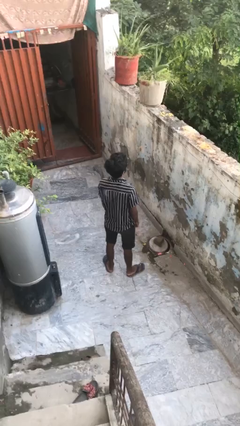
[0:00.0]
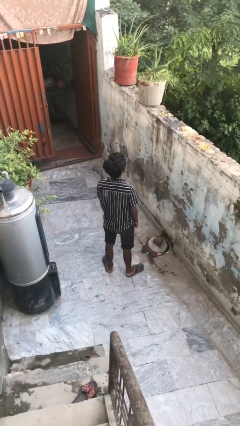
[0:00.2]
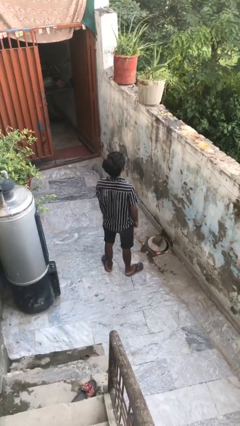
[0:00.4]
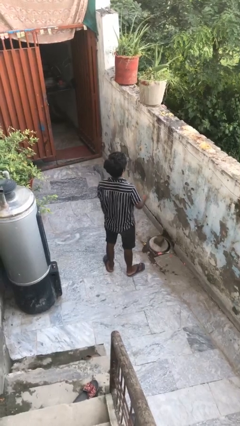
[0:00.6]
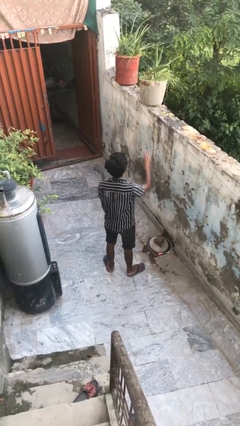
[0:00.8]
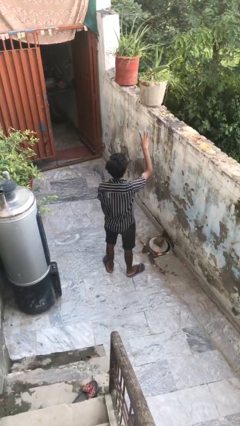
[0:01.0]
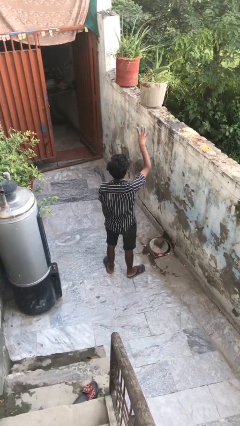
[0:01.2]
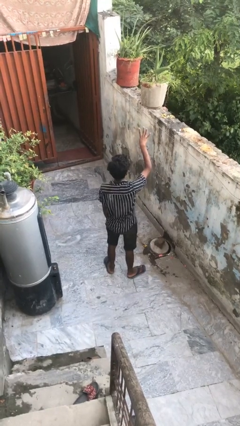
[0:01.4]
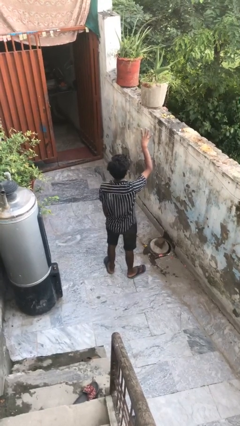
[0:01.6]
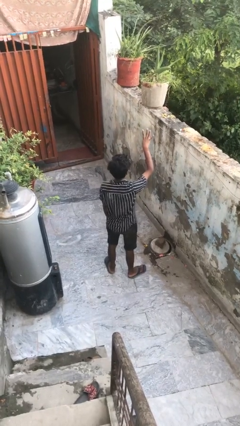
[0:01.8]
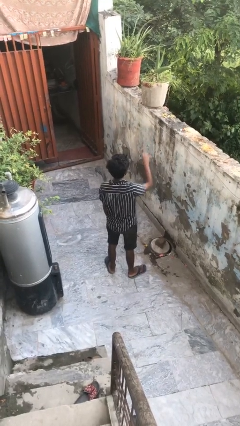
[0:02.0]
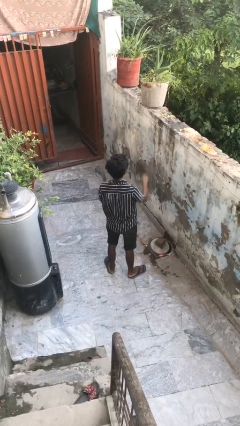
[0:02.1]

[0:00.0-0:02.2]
person gestures number four

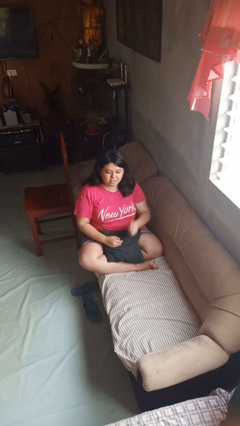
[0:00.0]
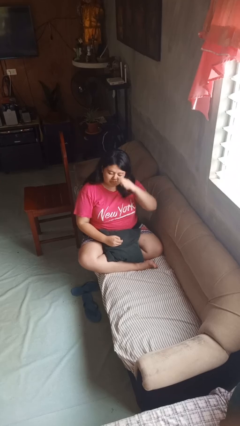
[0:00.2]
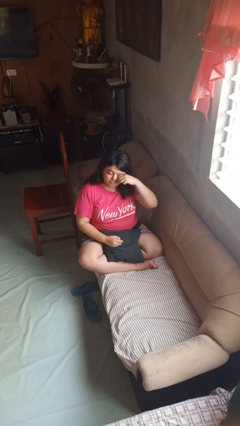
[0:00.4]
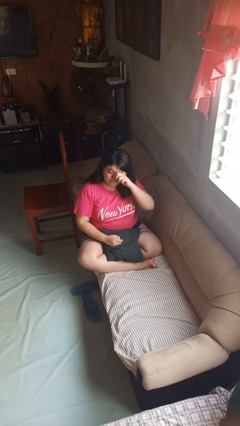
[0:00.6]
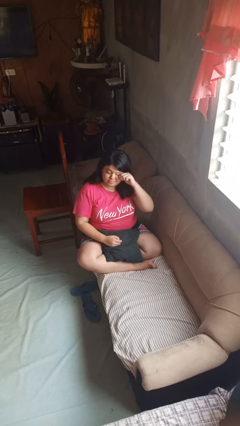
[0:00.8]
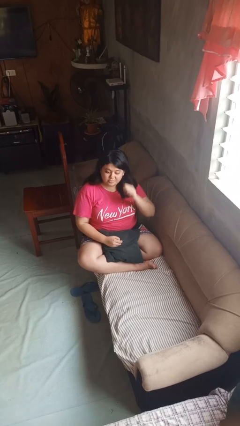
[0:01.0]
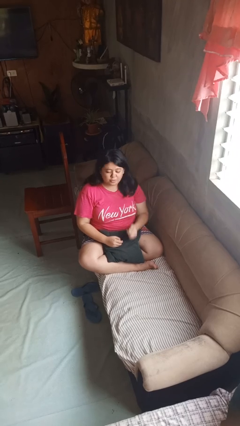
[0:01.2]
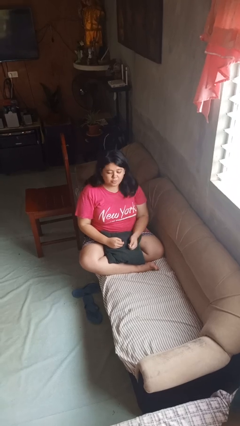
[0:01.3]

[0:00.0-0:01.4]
person rubs eyes

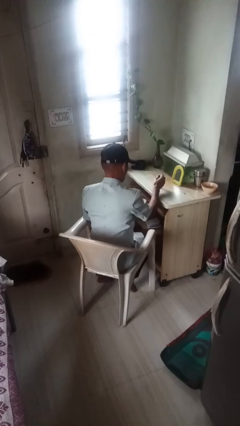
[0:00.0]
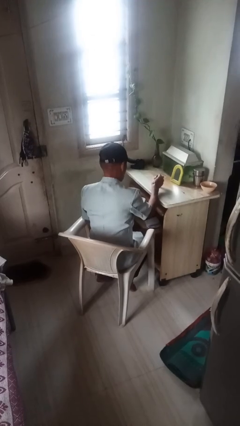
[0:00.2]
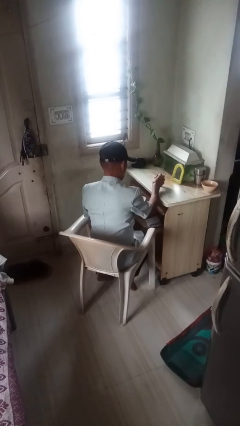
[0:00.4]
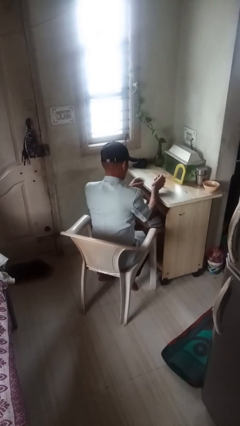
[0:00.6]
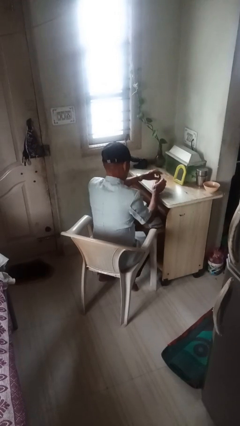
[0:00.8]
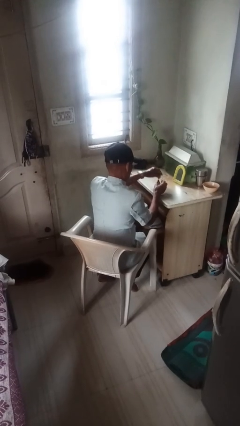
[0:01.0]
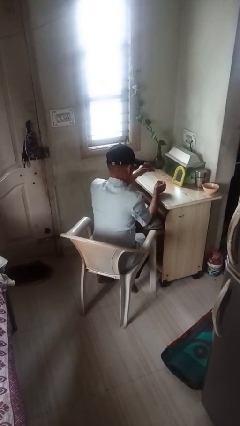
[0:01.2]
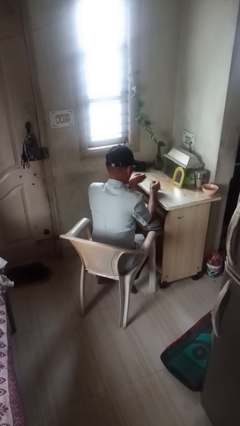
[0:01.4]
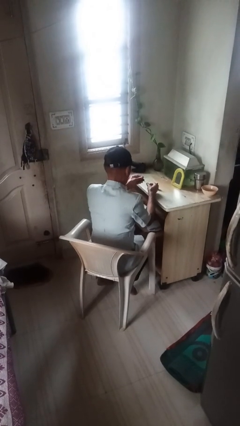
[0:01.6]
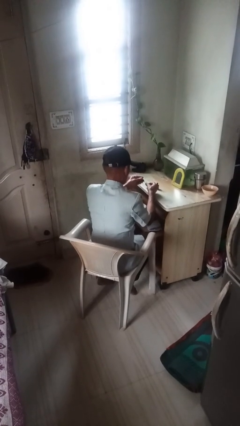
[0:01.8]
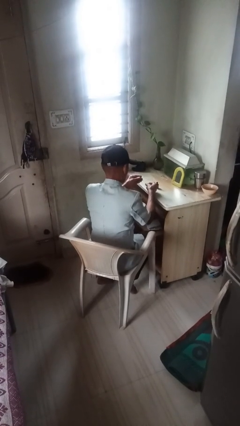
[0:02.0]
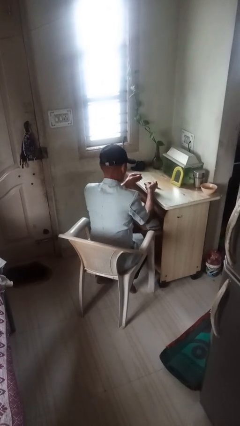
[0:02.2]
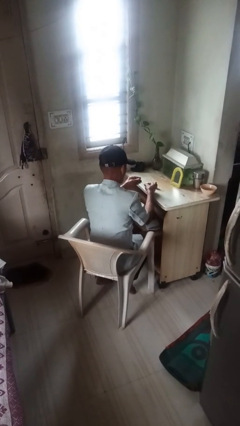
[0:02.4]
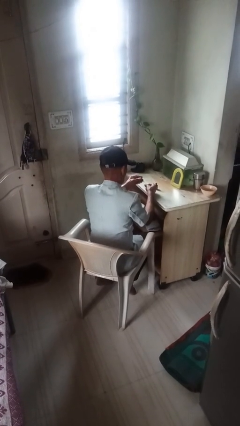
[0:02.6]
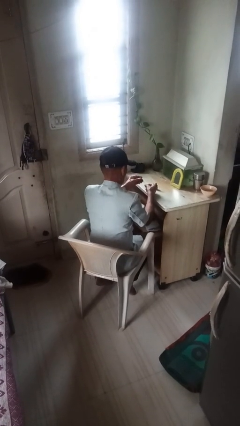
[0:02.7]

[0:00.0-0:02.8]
person paints fingernails

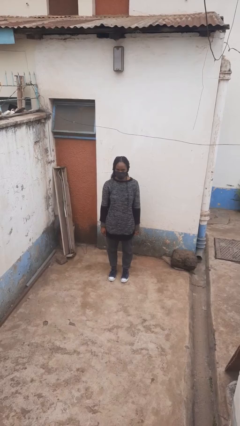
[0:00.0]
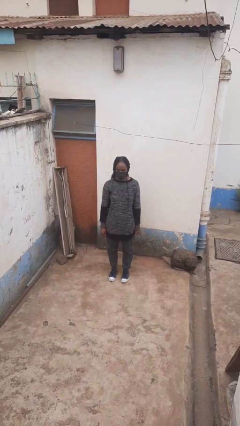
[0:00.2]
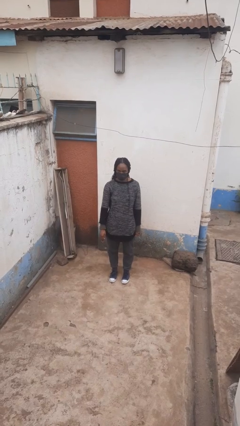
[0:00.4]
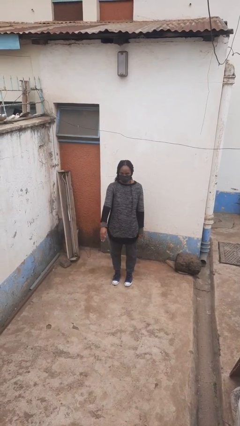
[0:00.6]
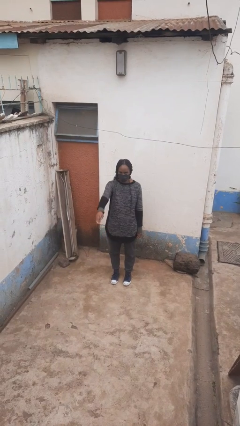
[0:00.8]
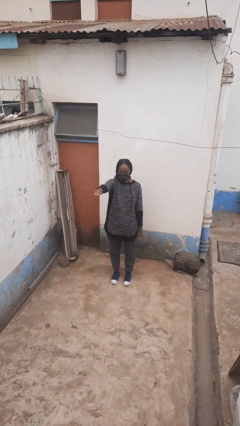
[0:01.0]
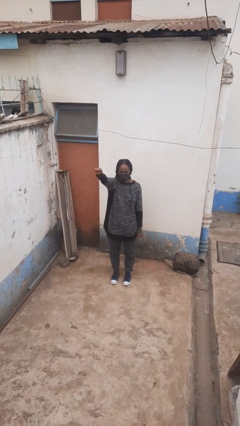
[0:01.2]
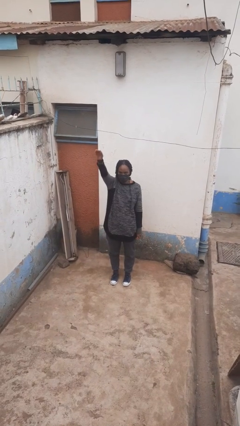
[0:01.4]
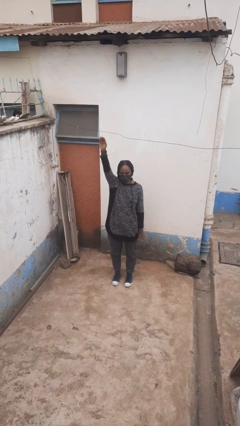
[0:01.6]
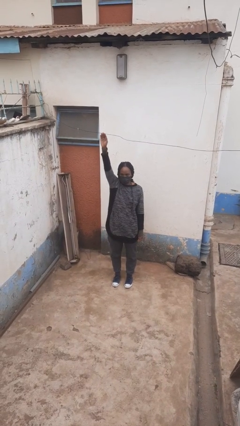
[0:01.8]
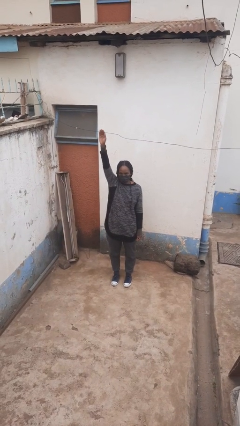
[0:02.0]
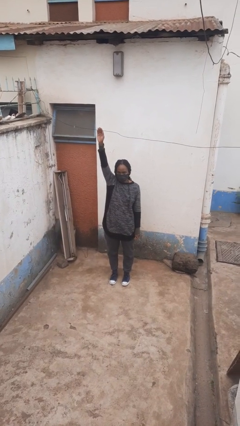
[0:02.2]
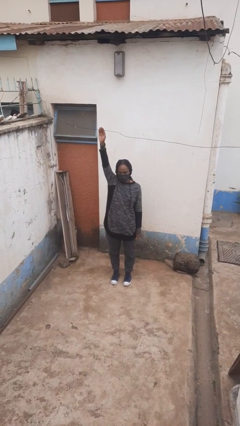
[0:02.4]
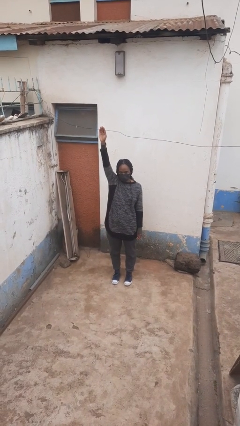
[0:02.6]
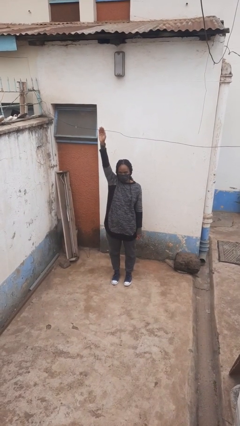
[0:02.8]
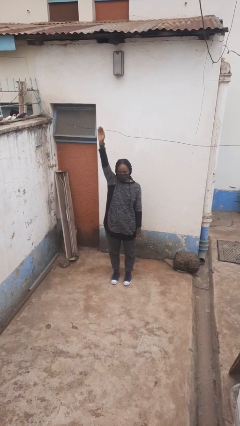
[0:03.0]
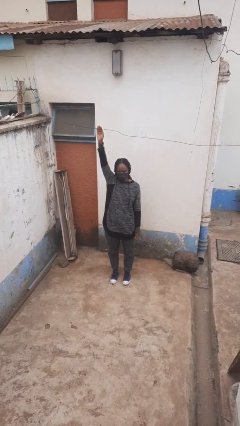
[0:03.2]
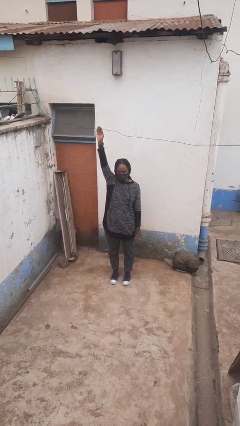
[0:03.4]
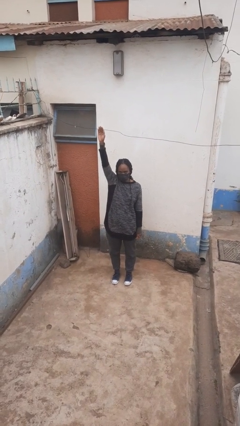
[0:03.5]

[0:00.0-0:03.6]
person gestures raise hand

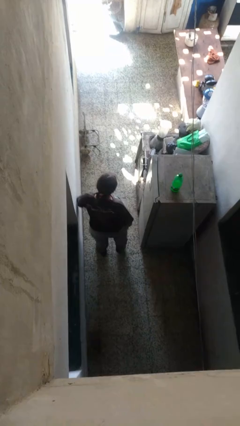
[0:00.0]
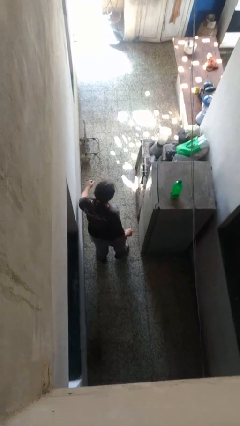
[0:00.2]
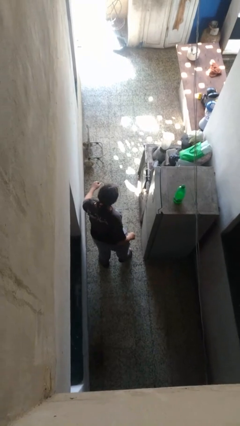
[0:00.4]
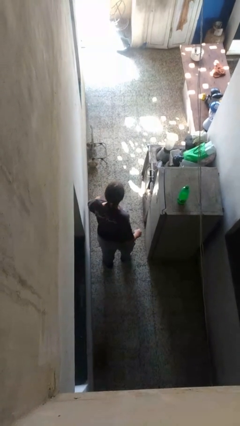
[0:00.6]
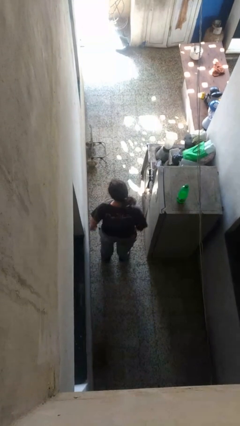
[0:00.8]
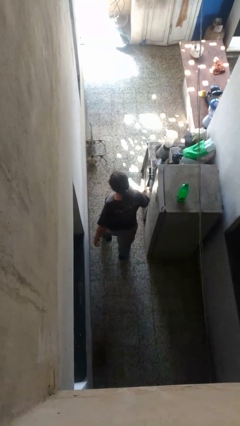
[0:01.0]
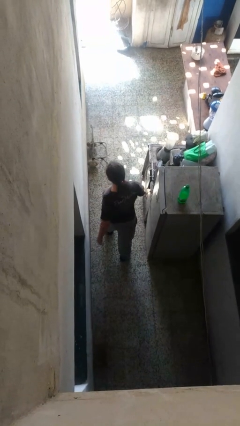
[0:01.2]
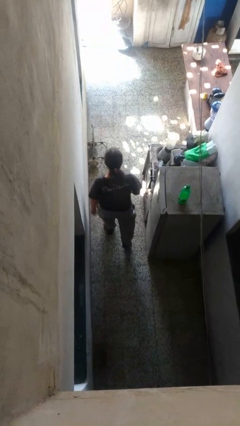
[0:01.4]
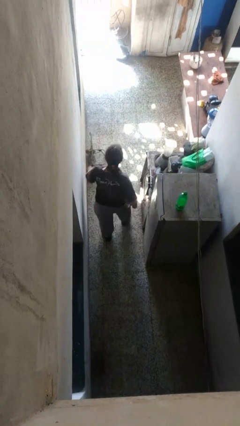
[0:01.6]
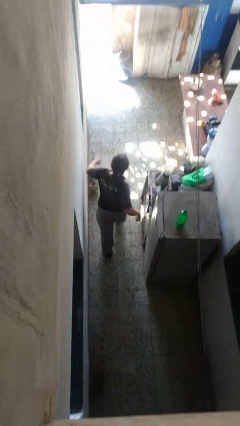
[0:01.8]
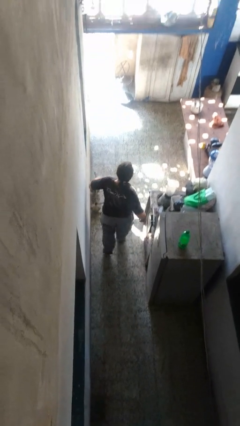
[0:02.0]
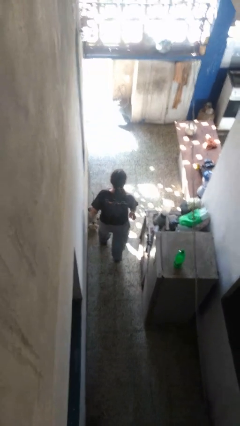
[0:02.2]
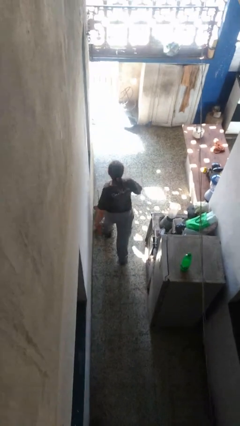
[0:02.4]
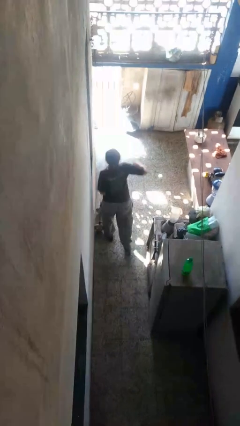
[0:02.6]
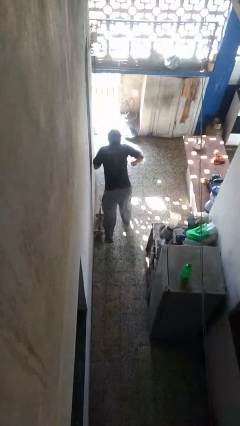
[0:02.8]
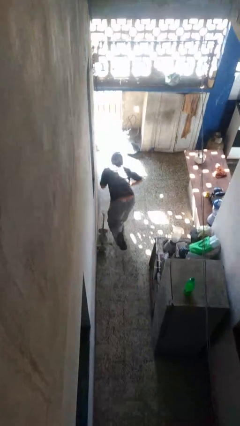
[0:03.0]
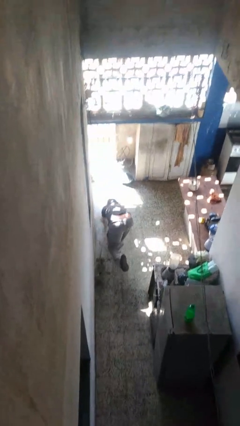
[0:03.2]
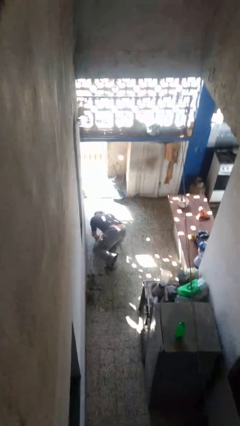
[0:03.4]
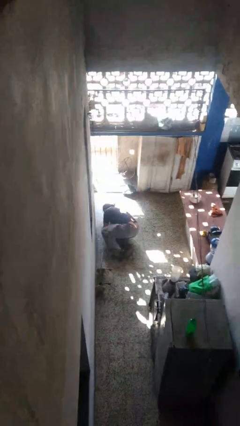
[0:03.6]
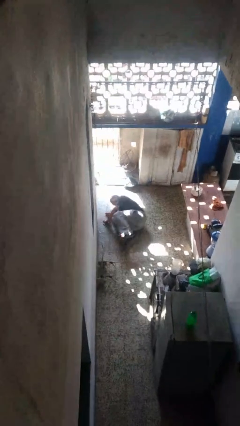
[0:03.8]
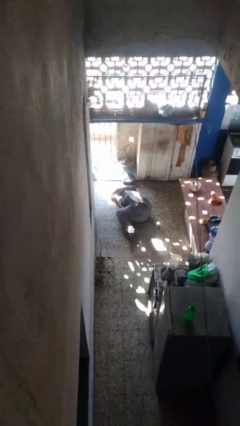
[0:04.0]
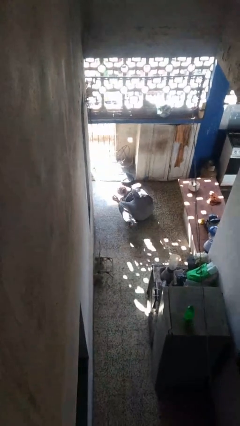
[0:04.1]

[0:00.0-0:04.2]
person trips on object on floor

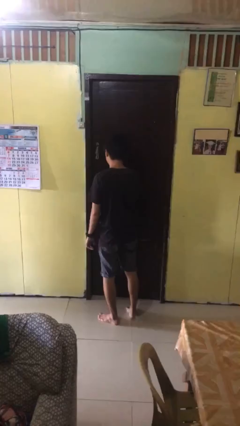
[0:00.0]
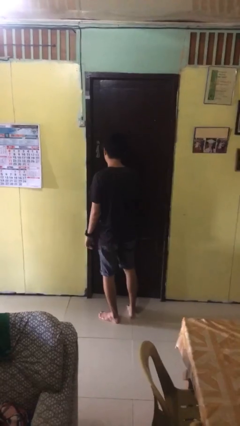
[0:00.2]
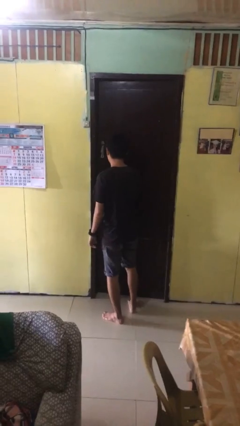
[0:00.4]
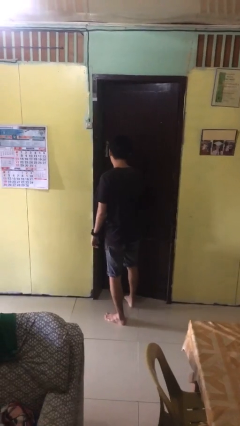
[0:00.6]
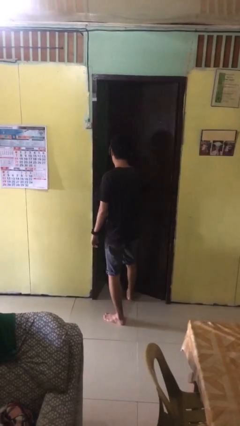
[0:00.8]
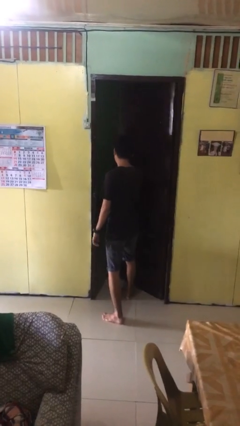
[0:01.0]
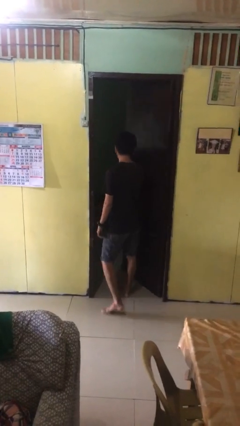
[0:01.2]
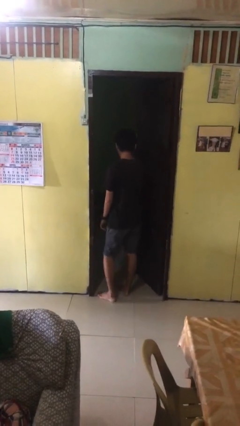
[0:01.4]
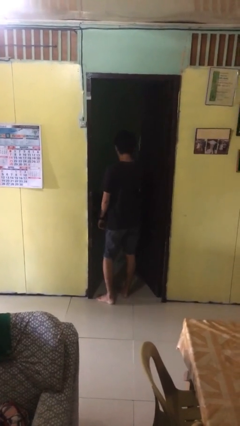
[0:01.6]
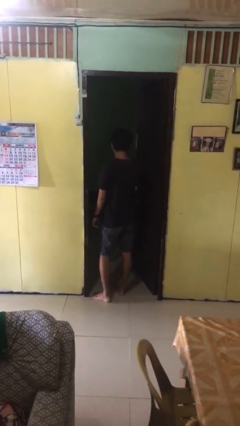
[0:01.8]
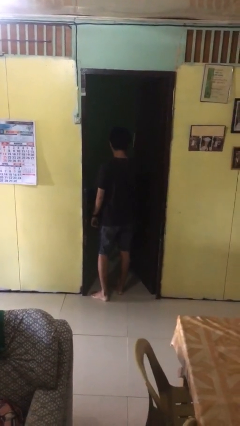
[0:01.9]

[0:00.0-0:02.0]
person opens facility door

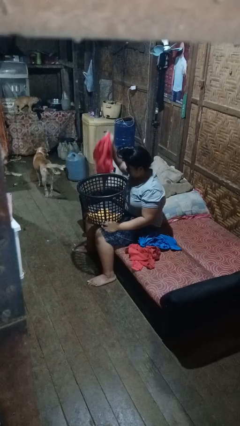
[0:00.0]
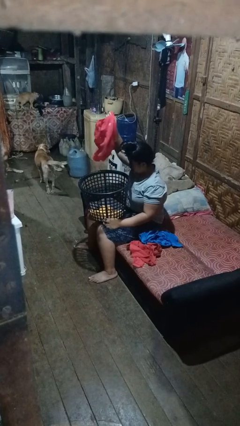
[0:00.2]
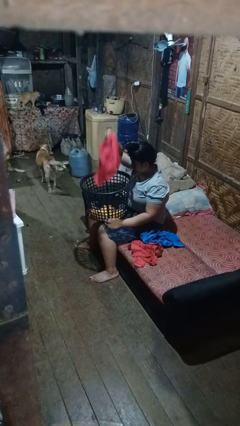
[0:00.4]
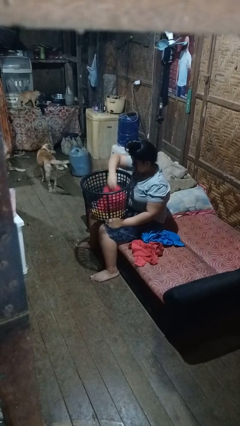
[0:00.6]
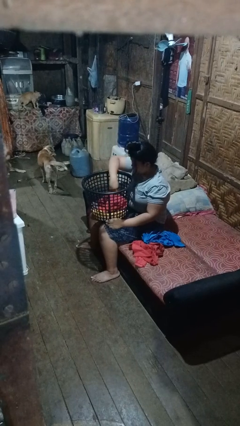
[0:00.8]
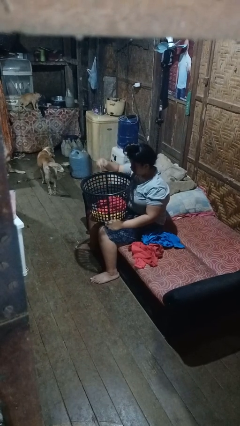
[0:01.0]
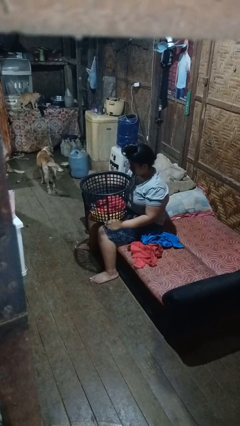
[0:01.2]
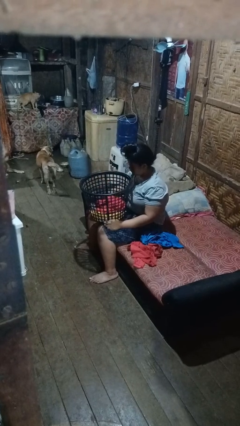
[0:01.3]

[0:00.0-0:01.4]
person puts object into basket
